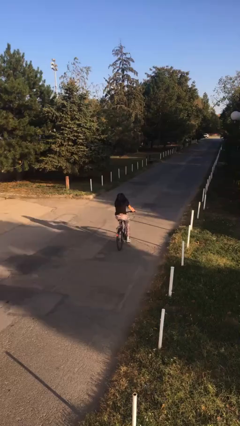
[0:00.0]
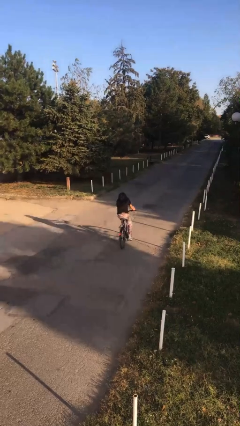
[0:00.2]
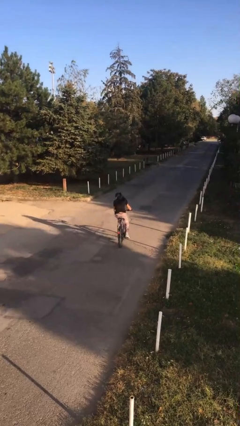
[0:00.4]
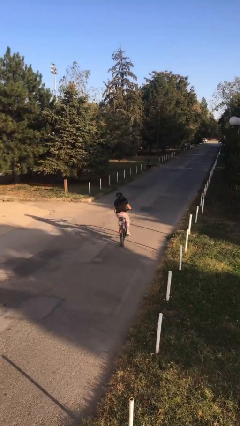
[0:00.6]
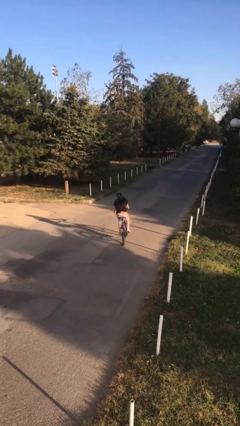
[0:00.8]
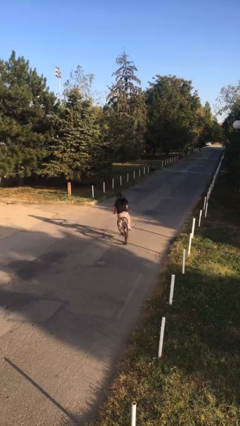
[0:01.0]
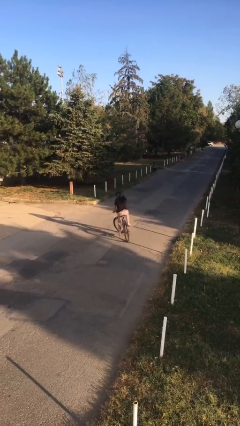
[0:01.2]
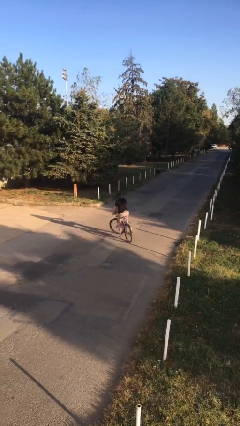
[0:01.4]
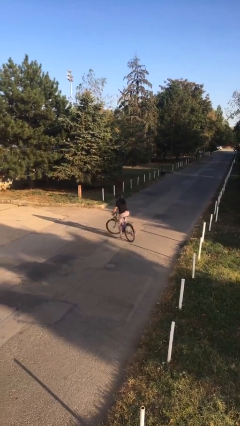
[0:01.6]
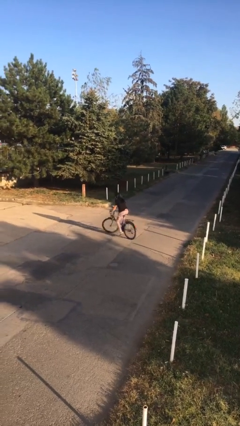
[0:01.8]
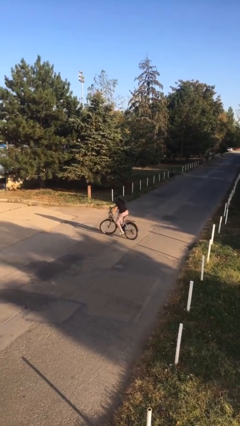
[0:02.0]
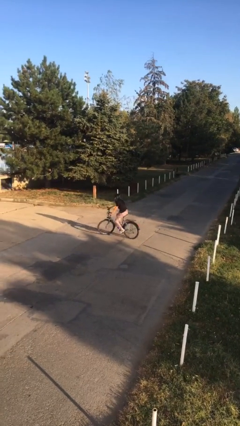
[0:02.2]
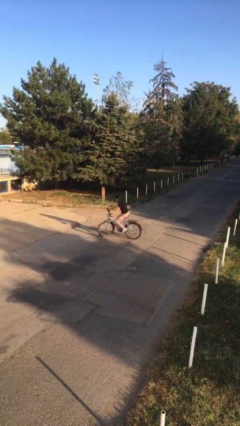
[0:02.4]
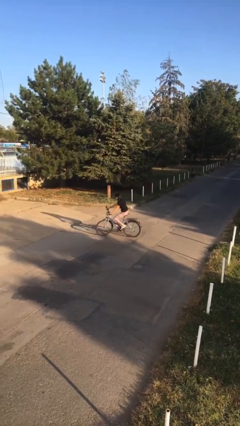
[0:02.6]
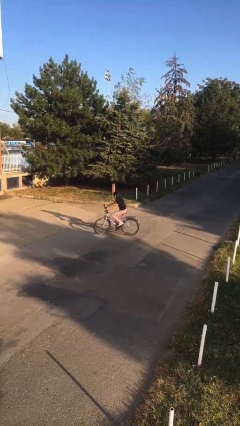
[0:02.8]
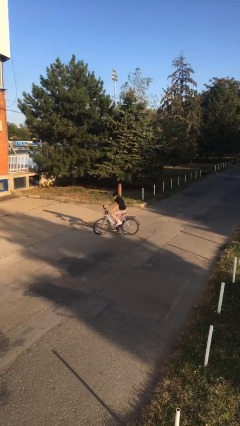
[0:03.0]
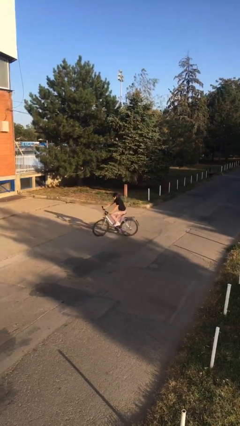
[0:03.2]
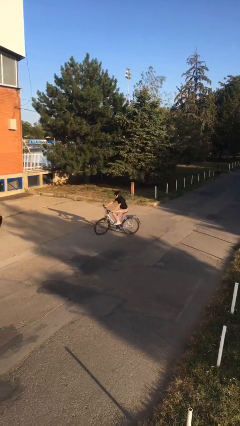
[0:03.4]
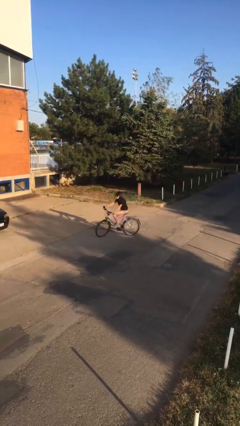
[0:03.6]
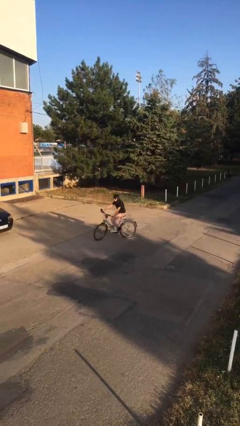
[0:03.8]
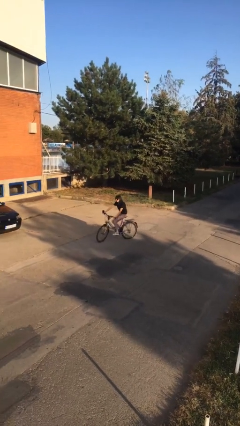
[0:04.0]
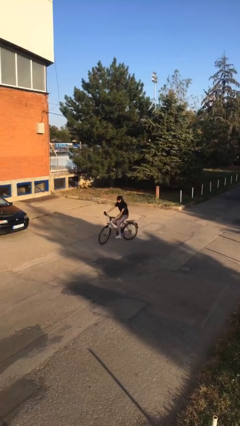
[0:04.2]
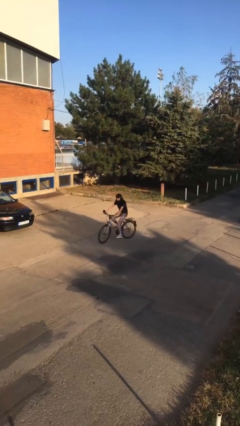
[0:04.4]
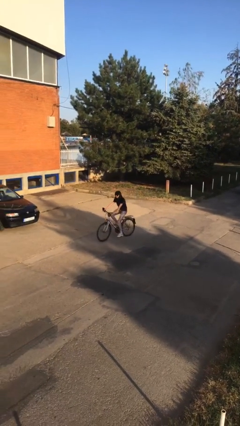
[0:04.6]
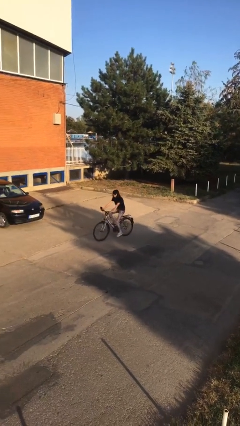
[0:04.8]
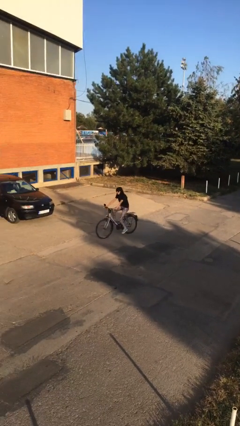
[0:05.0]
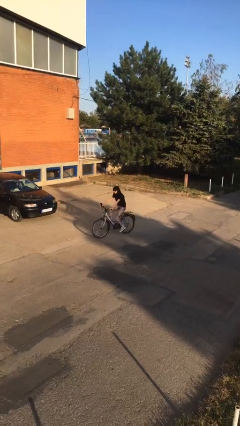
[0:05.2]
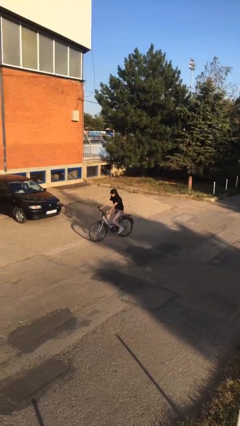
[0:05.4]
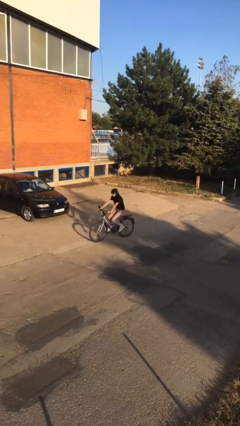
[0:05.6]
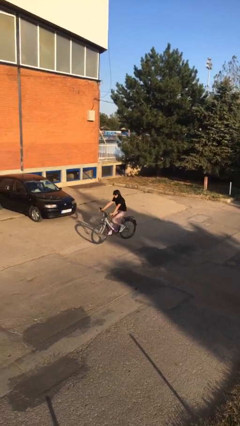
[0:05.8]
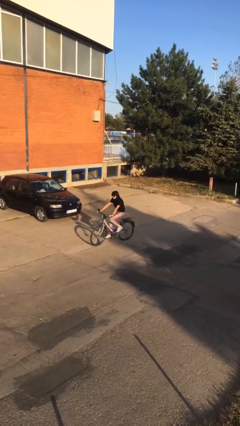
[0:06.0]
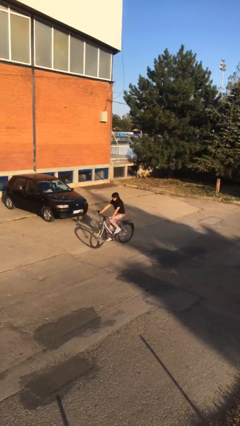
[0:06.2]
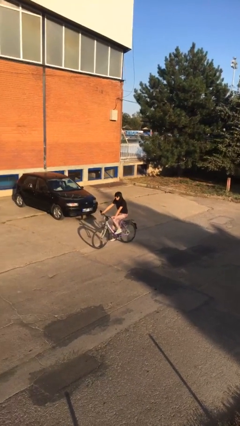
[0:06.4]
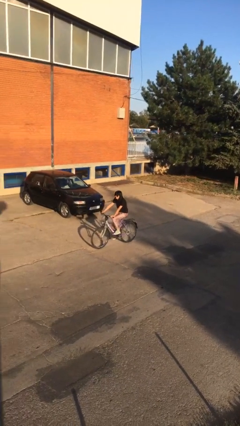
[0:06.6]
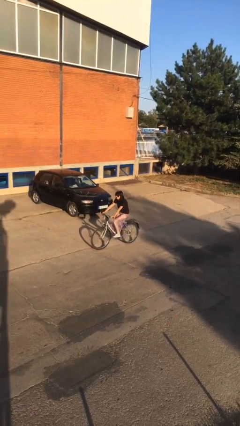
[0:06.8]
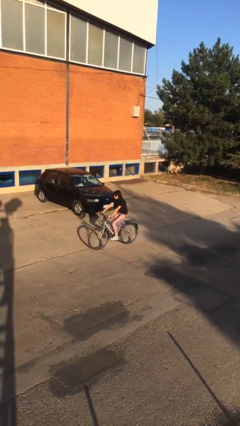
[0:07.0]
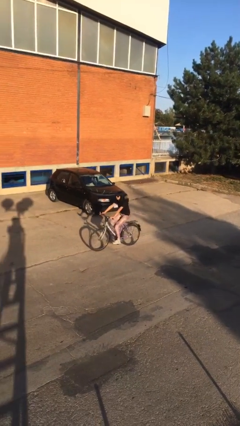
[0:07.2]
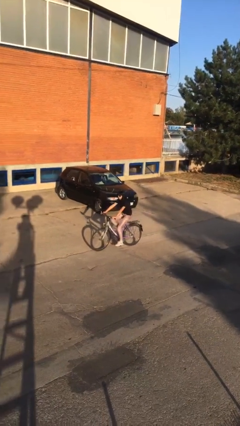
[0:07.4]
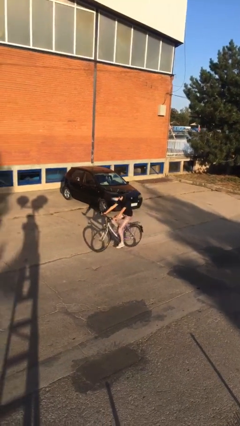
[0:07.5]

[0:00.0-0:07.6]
person rides bicycle

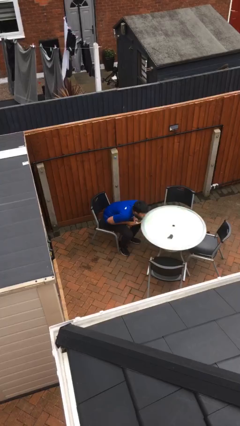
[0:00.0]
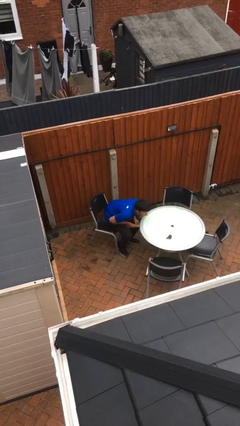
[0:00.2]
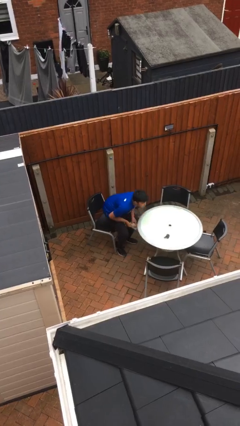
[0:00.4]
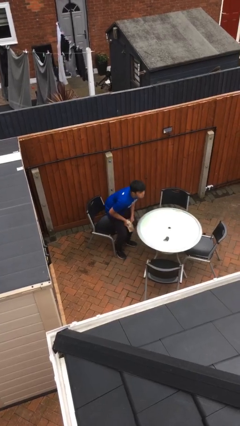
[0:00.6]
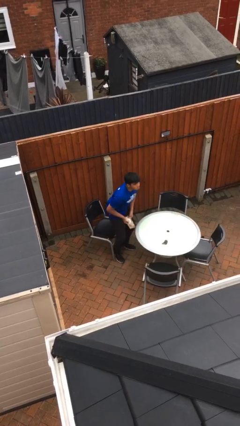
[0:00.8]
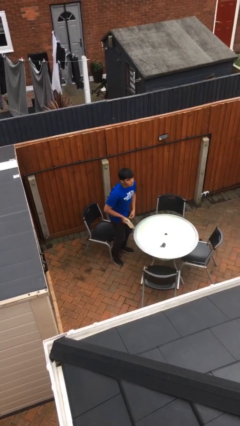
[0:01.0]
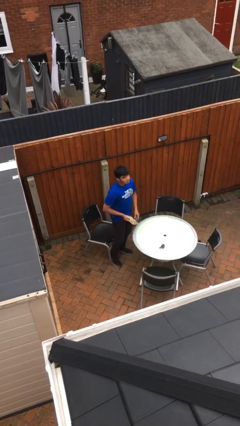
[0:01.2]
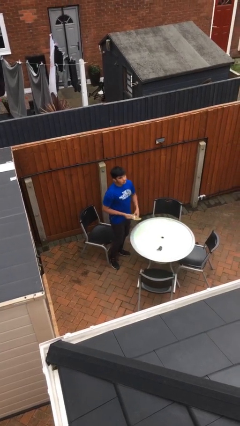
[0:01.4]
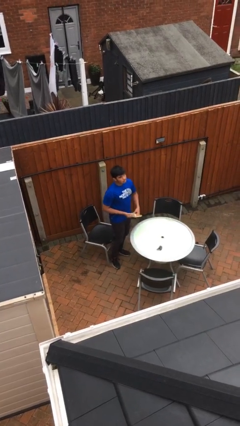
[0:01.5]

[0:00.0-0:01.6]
person stands up

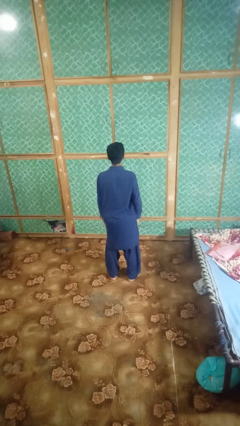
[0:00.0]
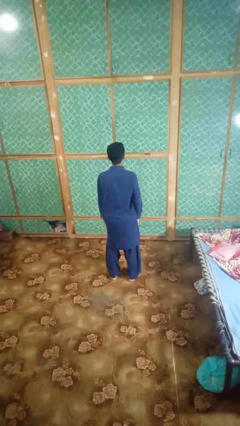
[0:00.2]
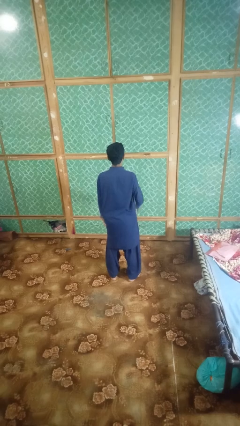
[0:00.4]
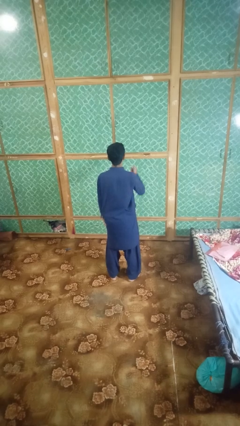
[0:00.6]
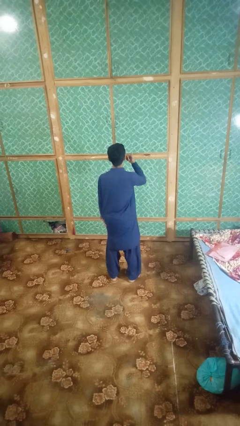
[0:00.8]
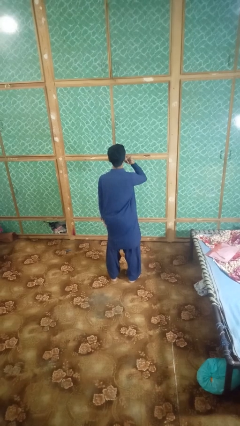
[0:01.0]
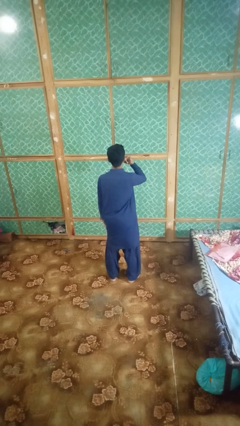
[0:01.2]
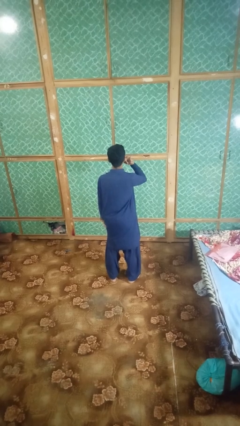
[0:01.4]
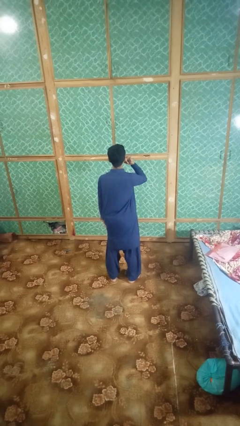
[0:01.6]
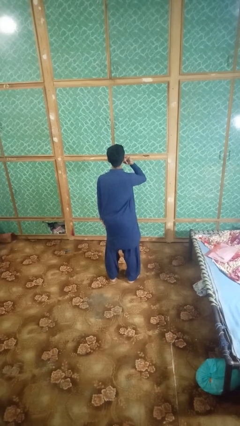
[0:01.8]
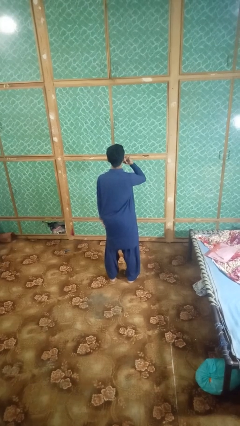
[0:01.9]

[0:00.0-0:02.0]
person gestures call me

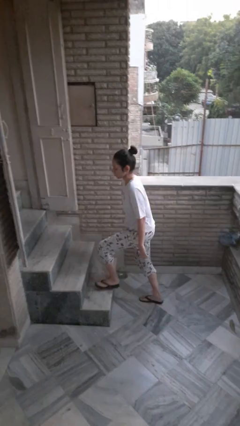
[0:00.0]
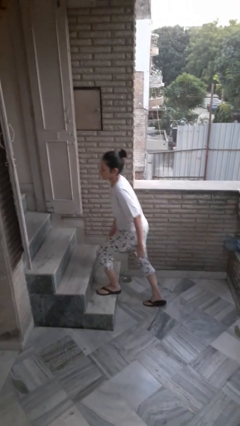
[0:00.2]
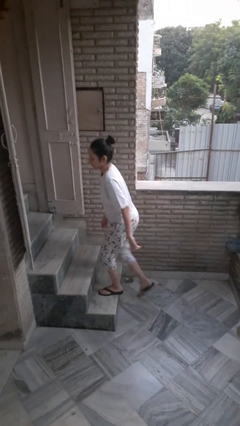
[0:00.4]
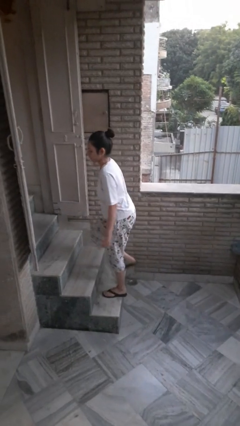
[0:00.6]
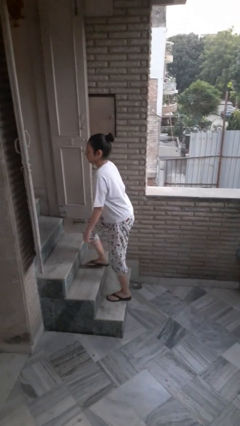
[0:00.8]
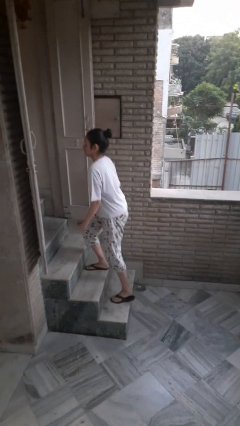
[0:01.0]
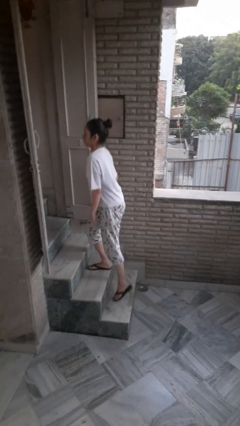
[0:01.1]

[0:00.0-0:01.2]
person climbs up stairs

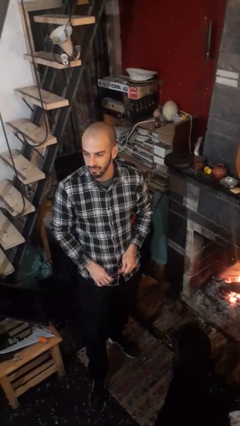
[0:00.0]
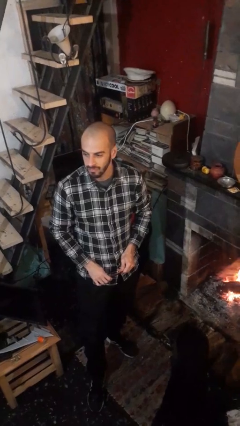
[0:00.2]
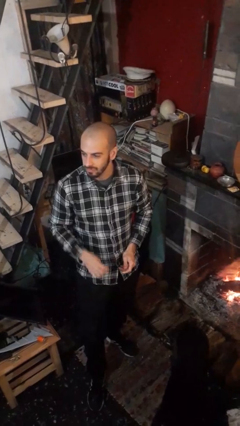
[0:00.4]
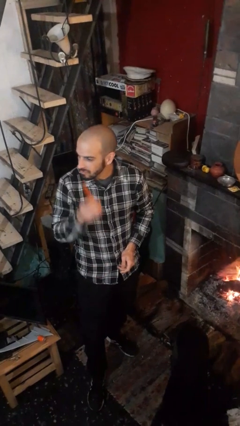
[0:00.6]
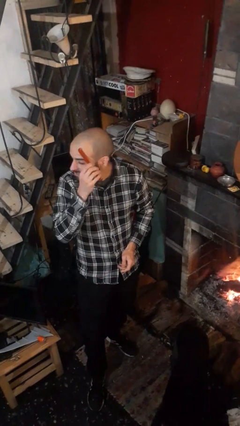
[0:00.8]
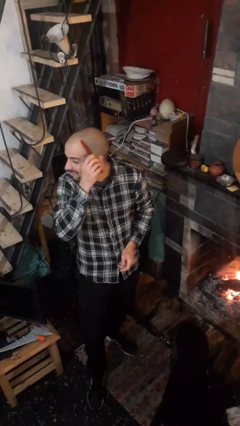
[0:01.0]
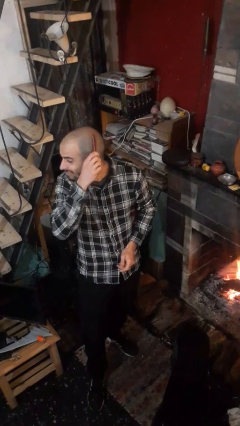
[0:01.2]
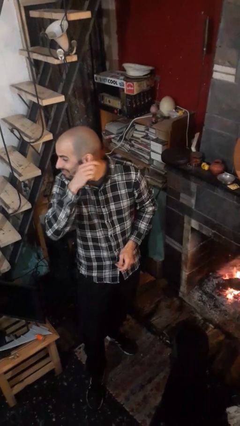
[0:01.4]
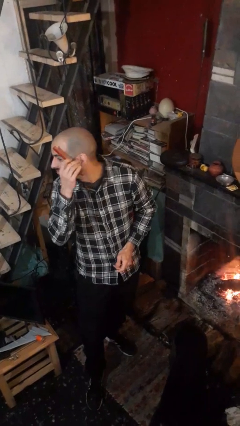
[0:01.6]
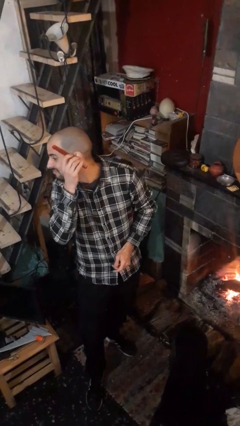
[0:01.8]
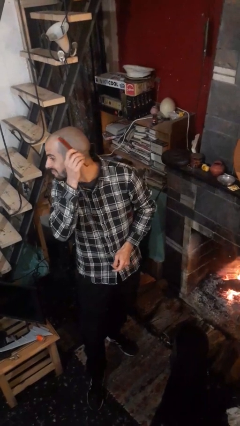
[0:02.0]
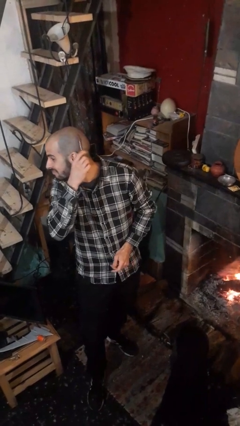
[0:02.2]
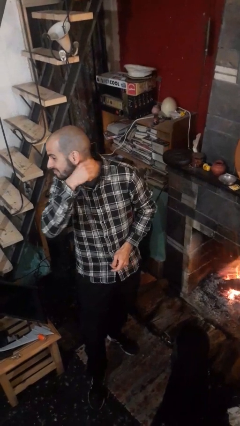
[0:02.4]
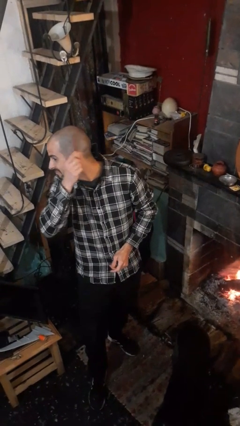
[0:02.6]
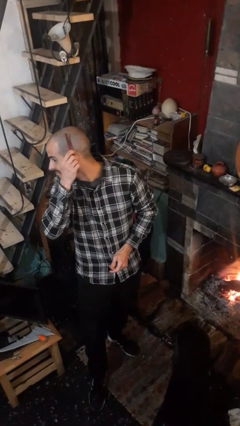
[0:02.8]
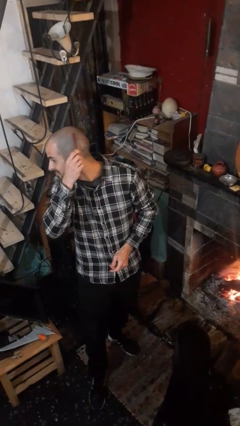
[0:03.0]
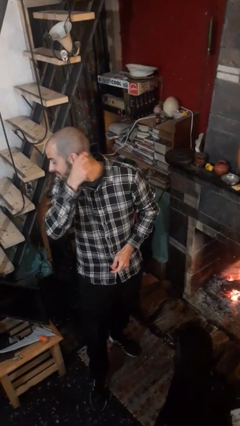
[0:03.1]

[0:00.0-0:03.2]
person brushes hair

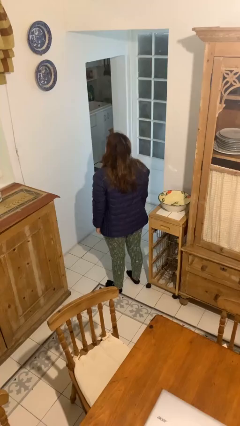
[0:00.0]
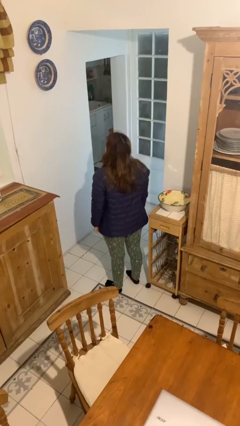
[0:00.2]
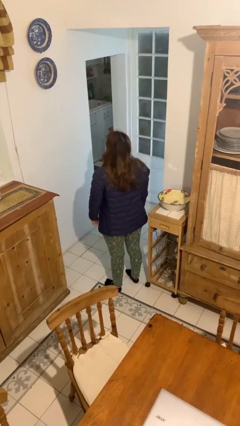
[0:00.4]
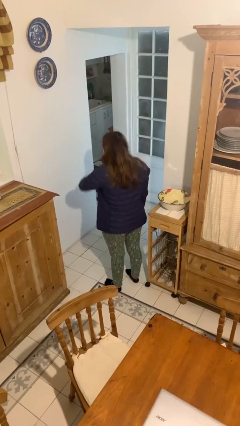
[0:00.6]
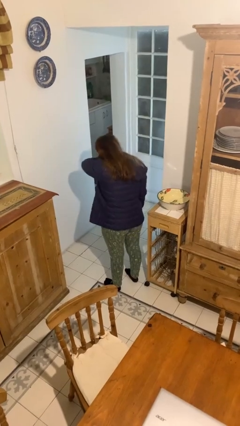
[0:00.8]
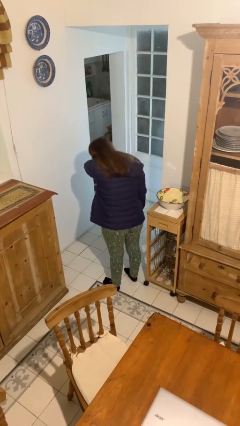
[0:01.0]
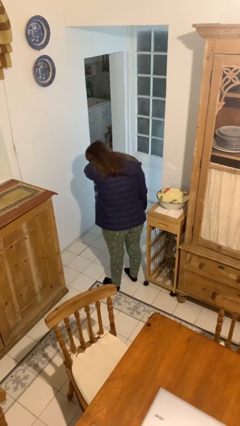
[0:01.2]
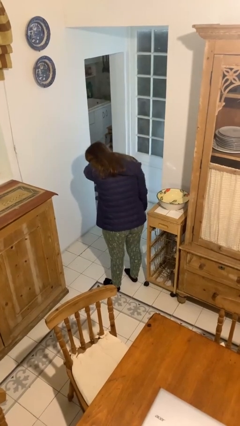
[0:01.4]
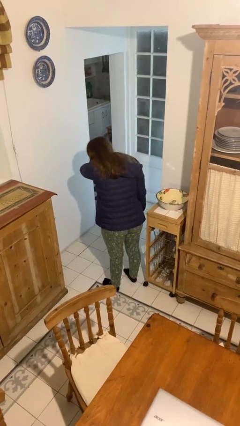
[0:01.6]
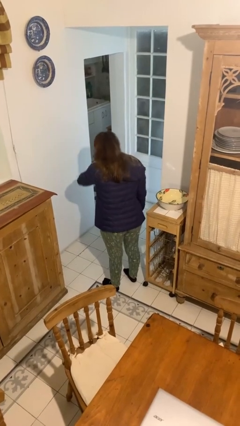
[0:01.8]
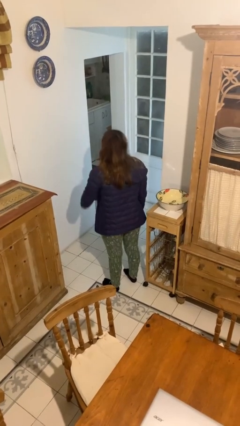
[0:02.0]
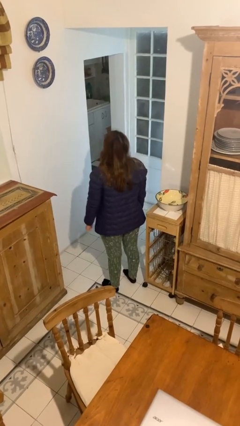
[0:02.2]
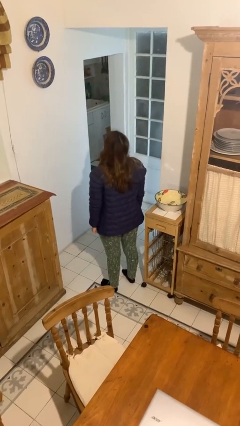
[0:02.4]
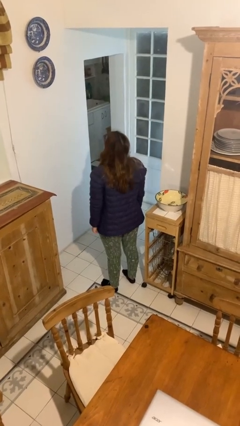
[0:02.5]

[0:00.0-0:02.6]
person sneezes into arm
